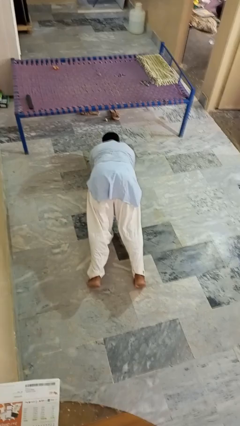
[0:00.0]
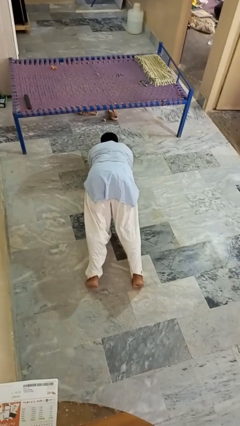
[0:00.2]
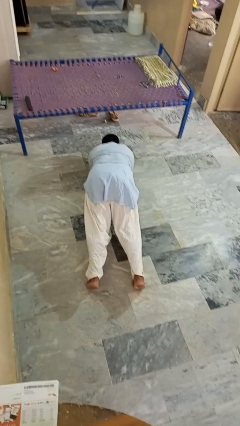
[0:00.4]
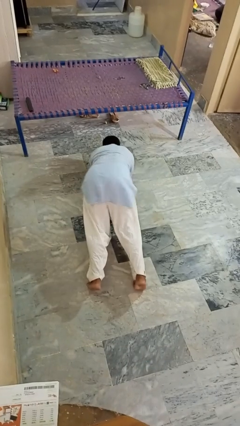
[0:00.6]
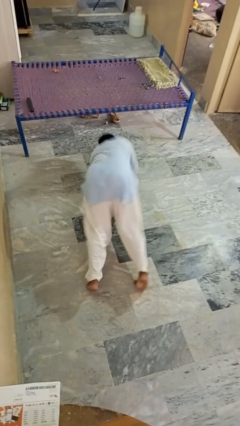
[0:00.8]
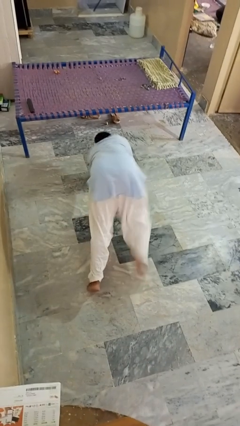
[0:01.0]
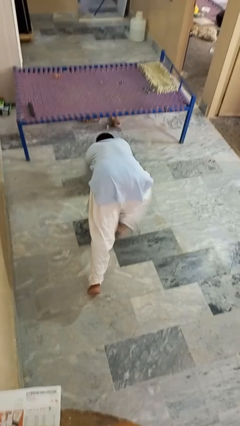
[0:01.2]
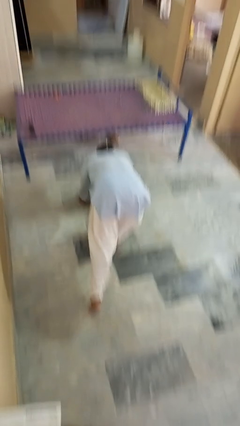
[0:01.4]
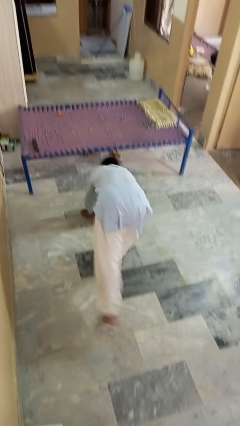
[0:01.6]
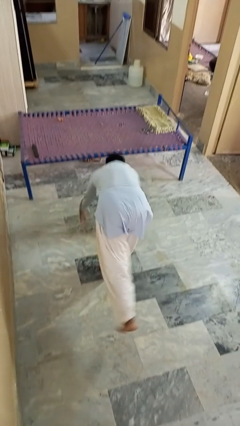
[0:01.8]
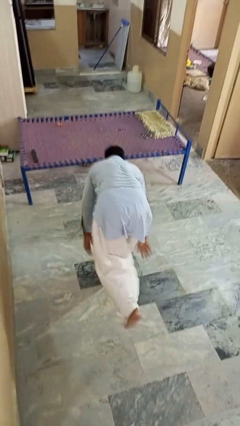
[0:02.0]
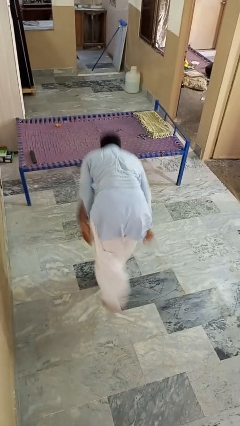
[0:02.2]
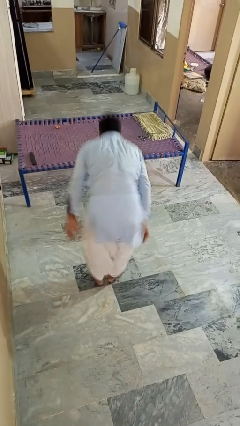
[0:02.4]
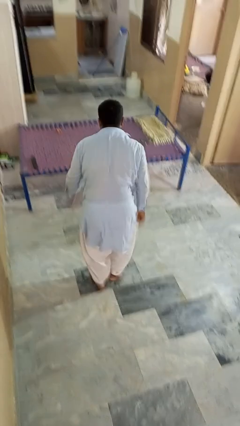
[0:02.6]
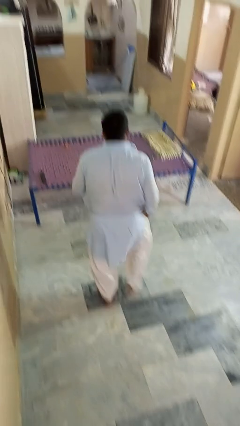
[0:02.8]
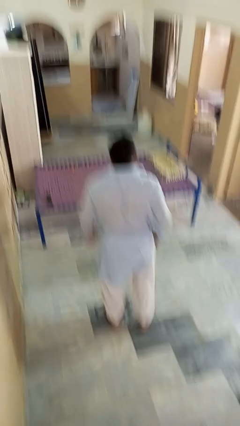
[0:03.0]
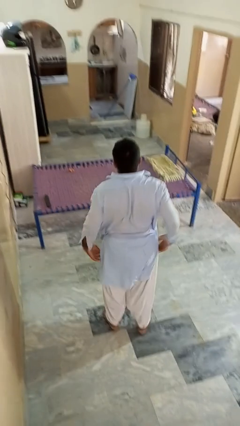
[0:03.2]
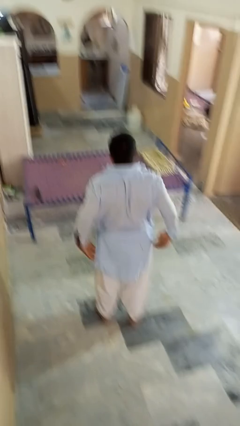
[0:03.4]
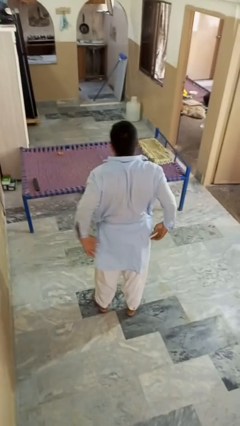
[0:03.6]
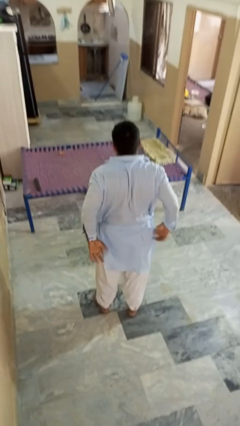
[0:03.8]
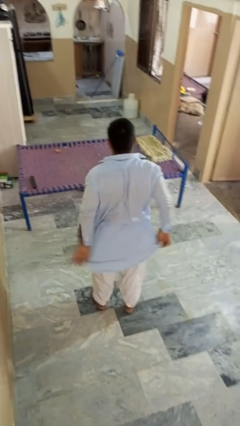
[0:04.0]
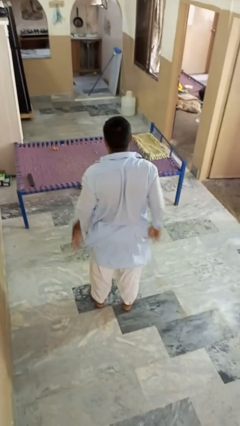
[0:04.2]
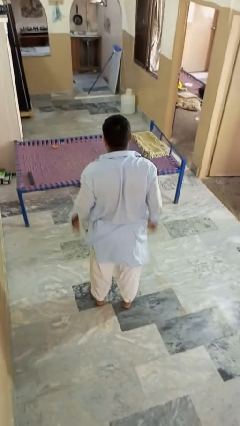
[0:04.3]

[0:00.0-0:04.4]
person stands up from floor

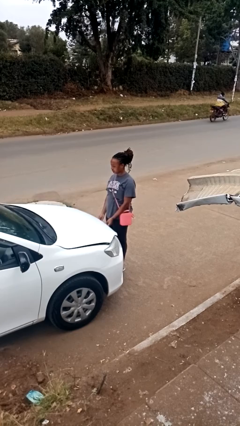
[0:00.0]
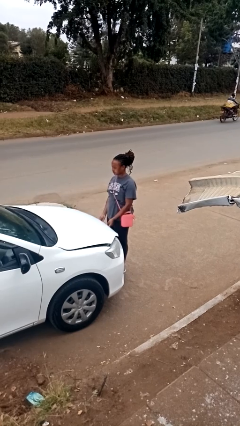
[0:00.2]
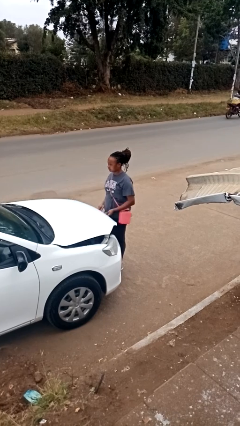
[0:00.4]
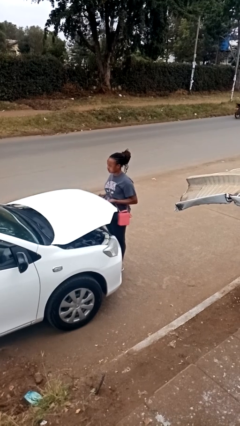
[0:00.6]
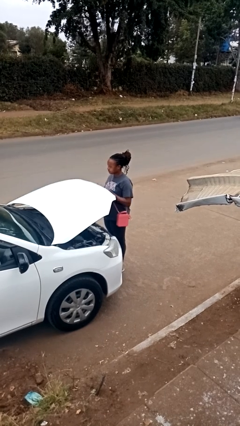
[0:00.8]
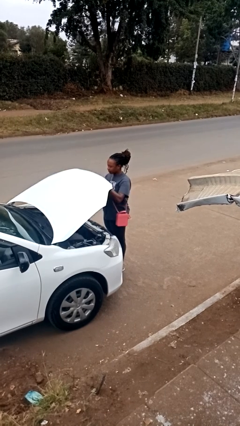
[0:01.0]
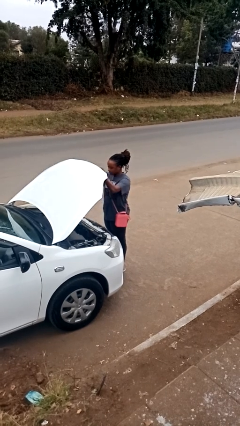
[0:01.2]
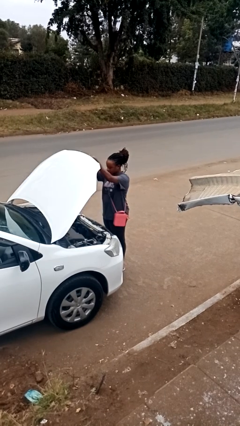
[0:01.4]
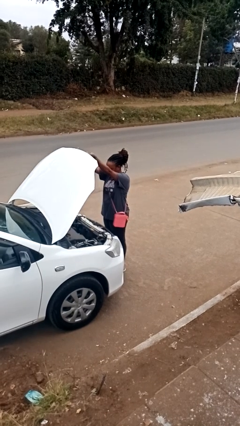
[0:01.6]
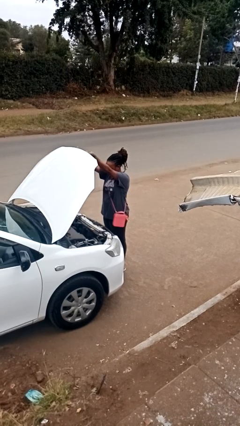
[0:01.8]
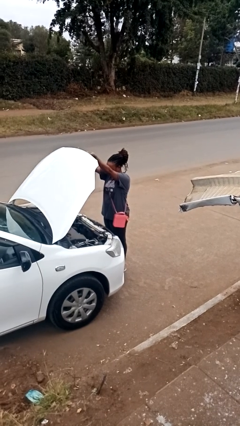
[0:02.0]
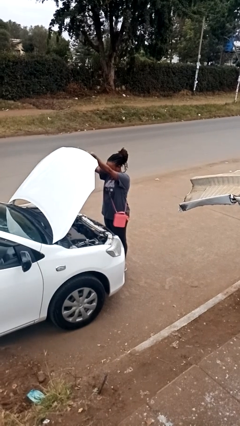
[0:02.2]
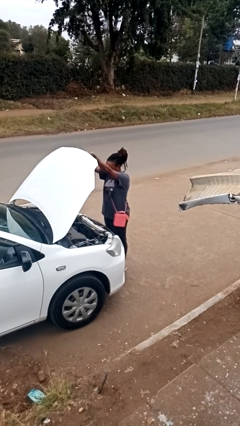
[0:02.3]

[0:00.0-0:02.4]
person opens car hood

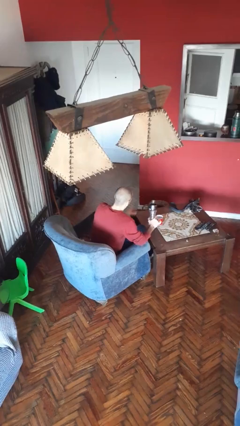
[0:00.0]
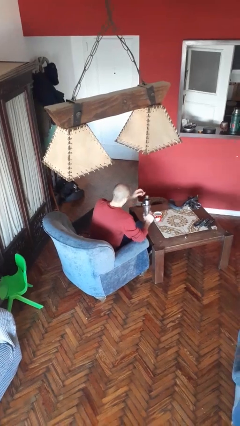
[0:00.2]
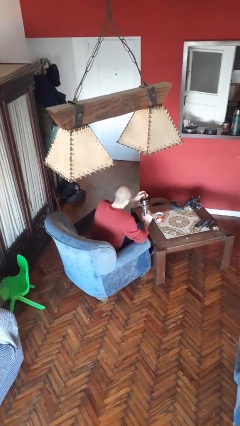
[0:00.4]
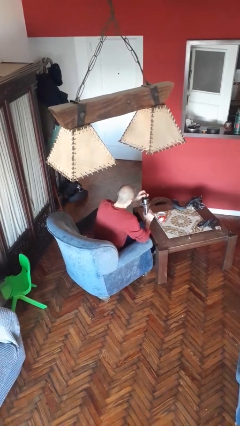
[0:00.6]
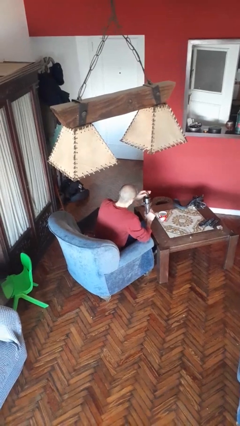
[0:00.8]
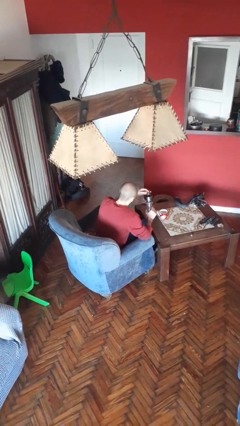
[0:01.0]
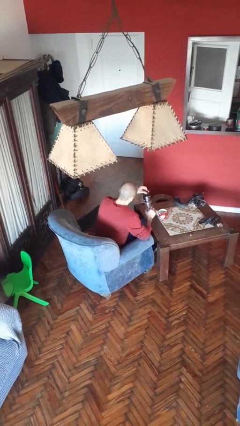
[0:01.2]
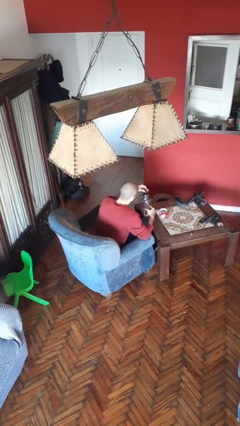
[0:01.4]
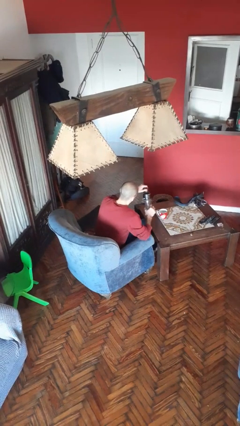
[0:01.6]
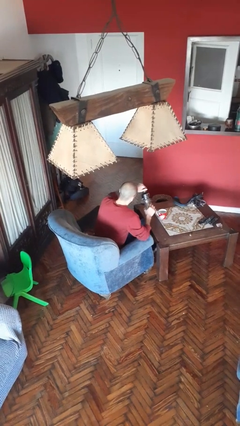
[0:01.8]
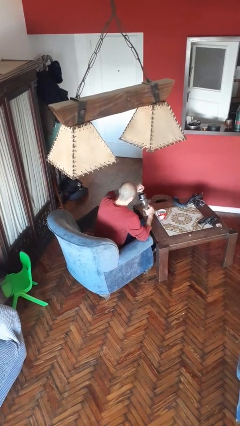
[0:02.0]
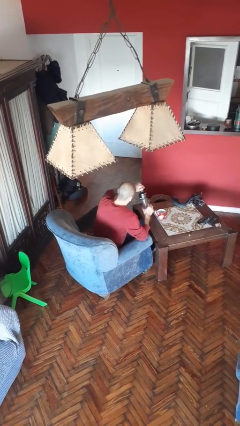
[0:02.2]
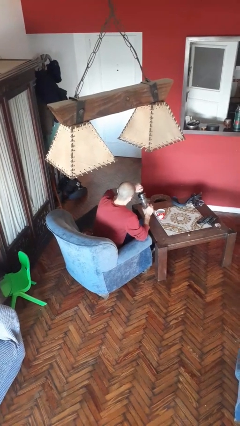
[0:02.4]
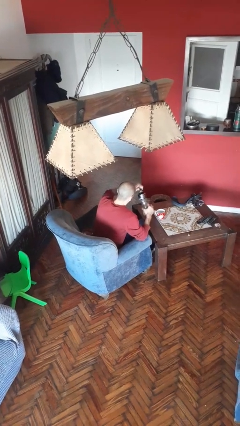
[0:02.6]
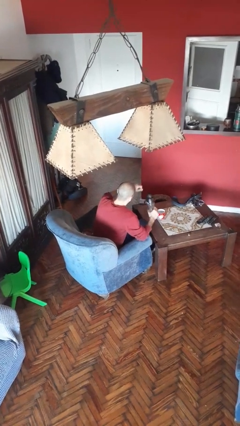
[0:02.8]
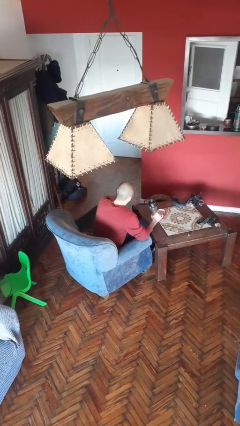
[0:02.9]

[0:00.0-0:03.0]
person screws lid to bottle

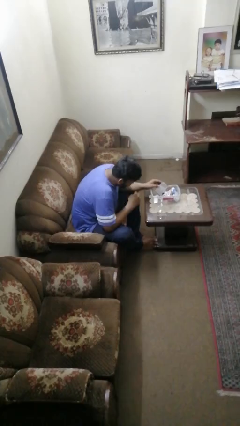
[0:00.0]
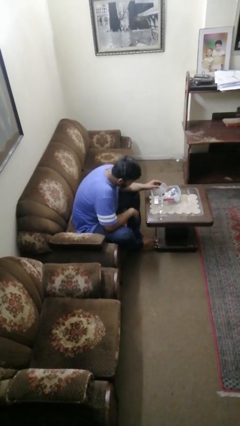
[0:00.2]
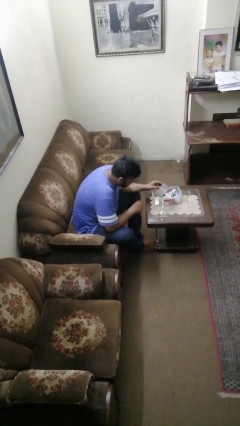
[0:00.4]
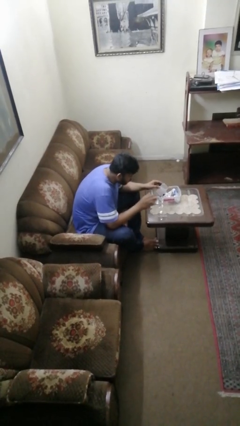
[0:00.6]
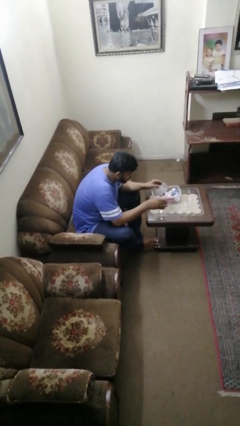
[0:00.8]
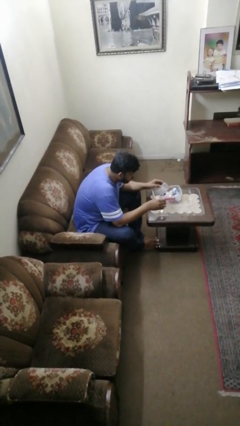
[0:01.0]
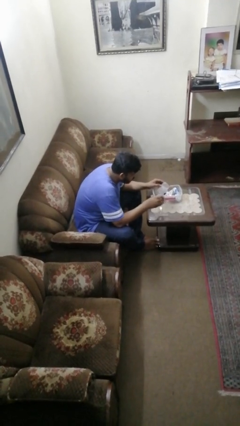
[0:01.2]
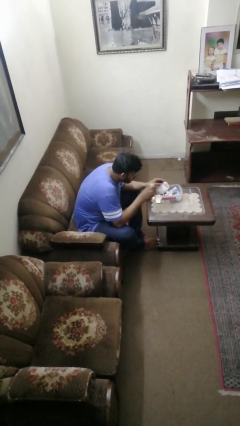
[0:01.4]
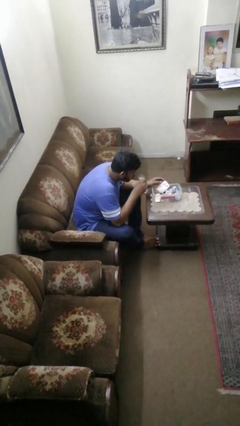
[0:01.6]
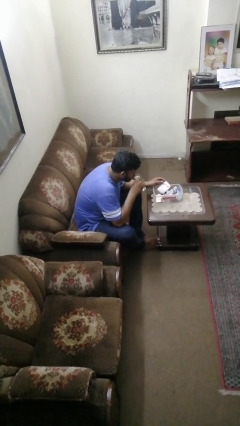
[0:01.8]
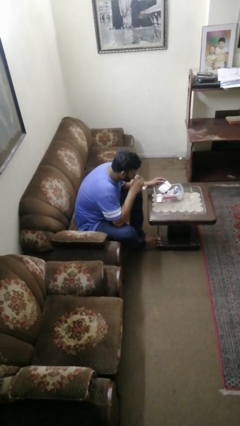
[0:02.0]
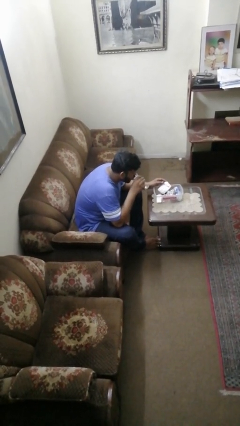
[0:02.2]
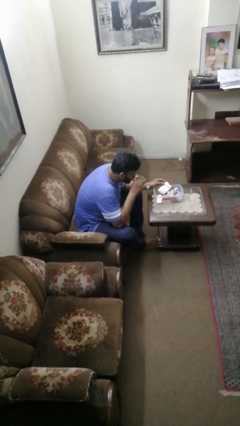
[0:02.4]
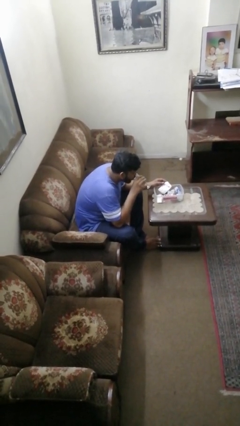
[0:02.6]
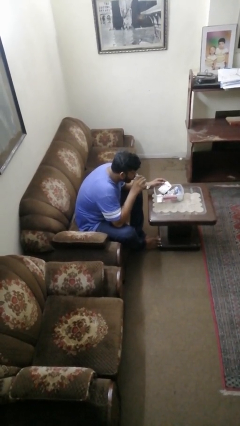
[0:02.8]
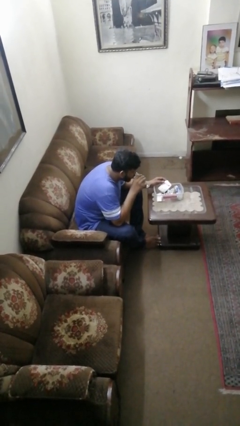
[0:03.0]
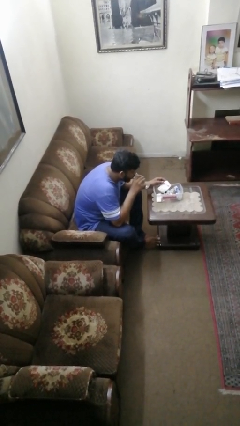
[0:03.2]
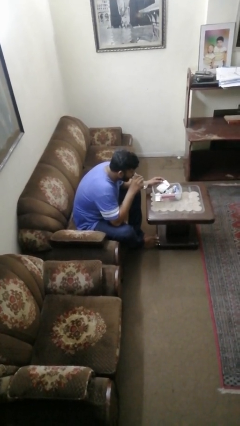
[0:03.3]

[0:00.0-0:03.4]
person drinks from cup

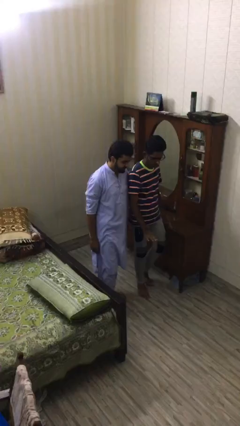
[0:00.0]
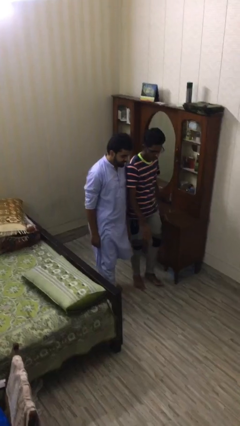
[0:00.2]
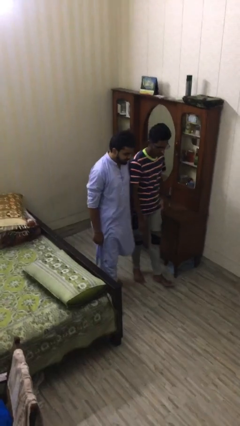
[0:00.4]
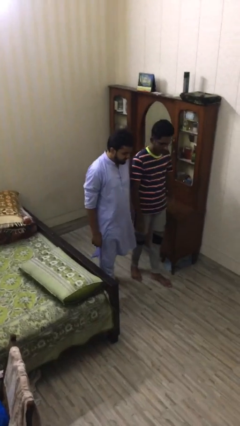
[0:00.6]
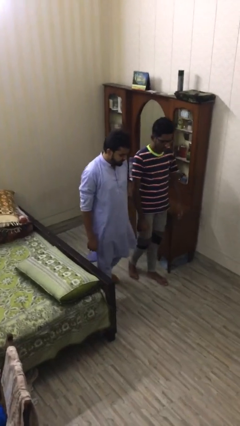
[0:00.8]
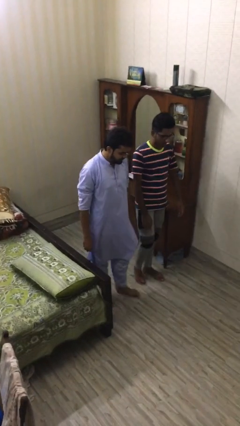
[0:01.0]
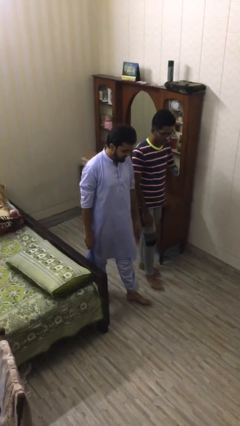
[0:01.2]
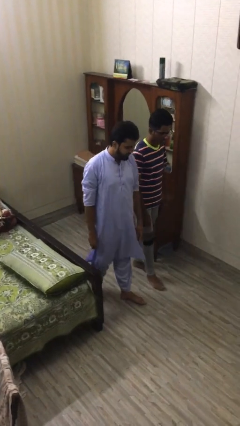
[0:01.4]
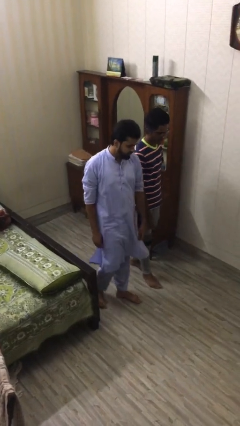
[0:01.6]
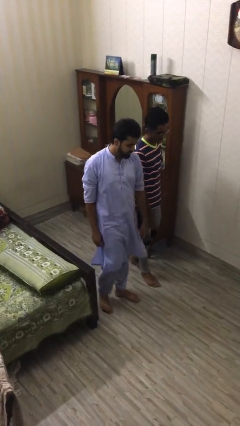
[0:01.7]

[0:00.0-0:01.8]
person talks to person

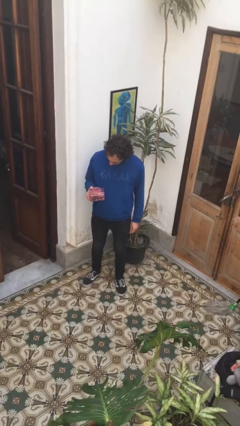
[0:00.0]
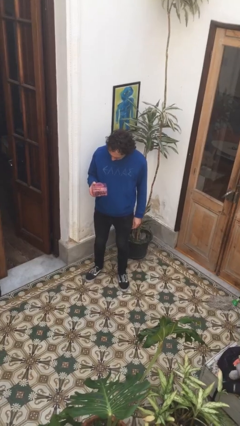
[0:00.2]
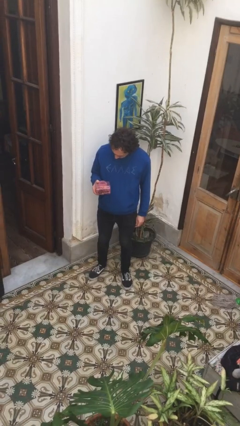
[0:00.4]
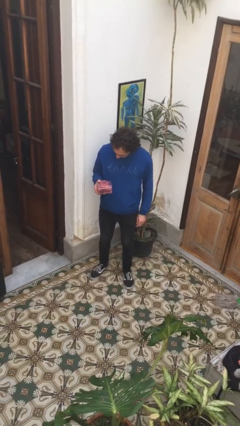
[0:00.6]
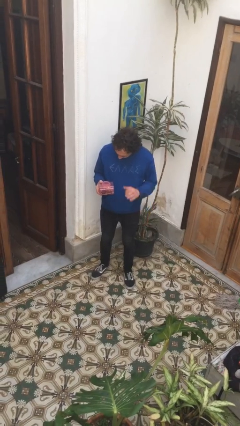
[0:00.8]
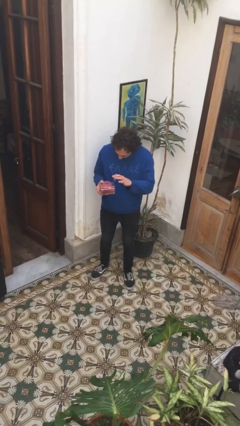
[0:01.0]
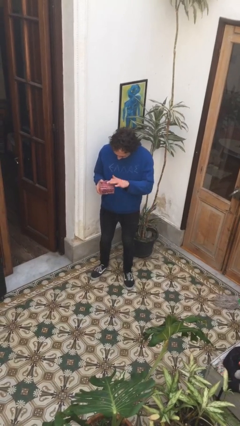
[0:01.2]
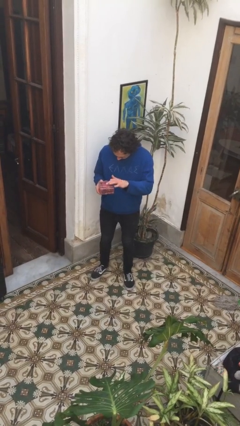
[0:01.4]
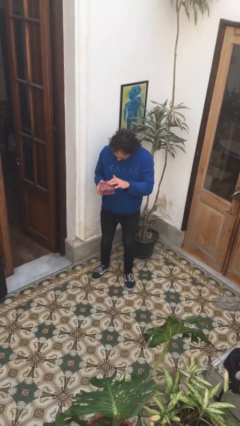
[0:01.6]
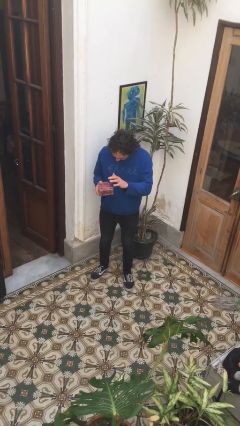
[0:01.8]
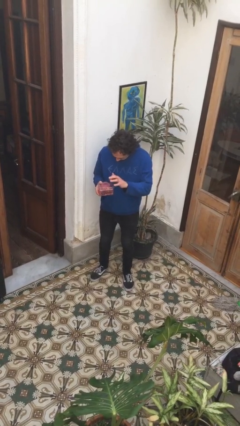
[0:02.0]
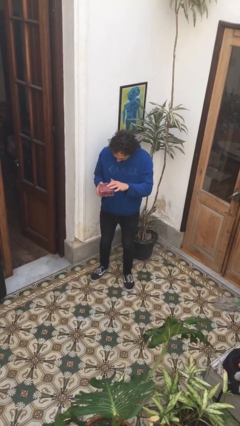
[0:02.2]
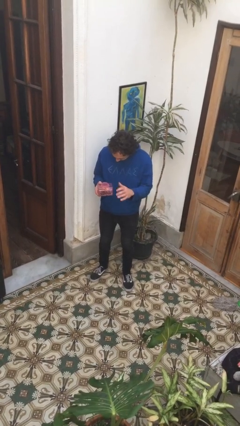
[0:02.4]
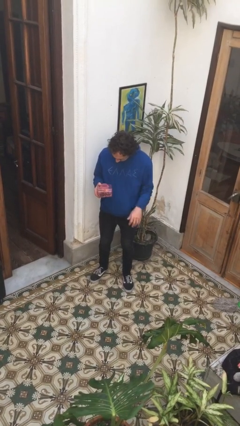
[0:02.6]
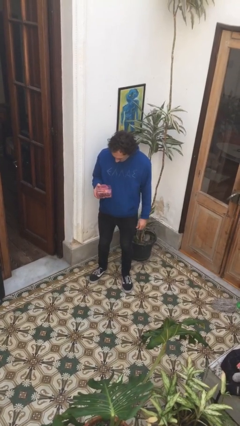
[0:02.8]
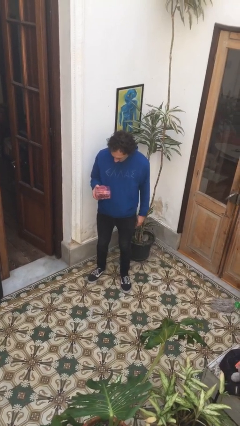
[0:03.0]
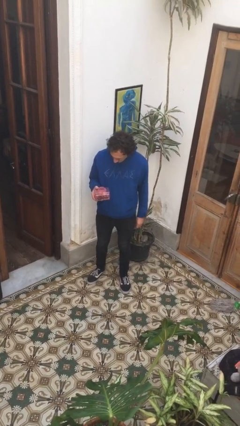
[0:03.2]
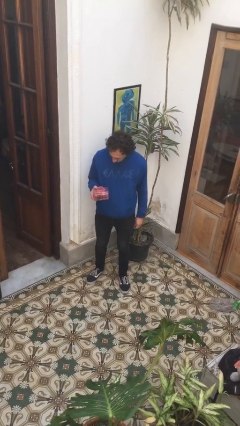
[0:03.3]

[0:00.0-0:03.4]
person taps object with finger
